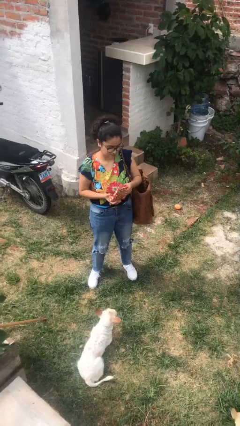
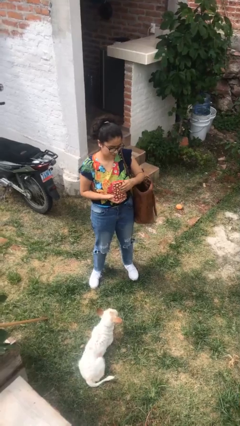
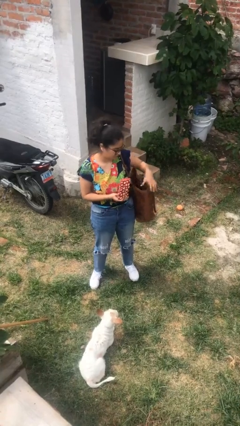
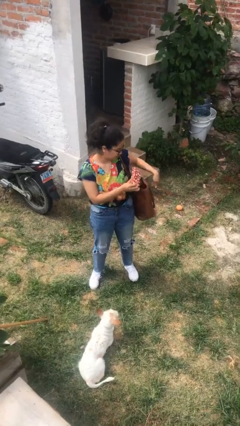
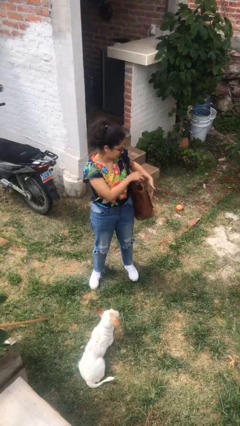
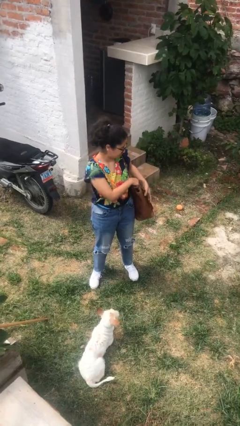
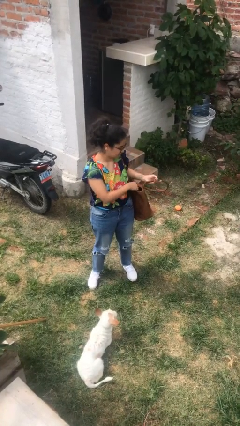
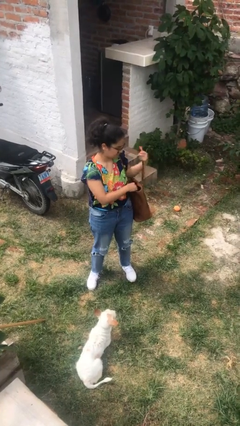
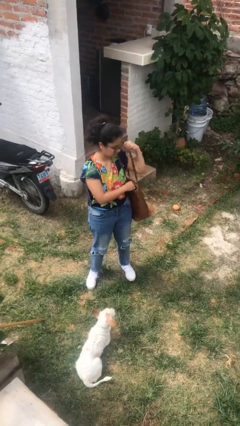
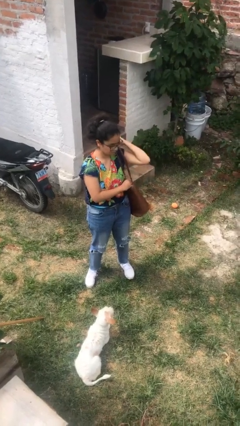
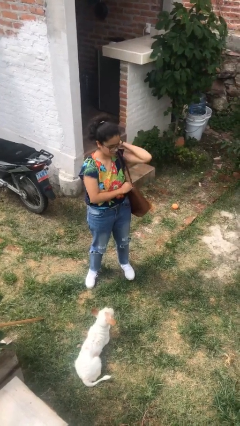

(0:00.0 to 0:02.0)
person puts object into purse

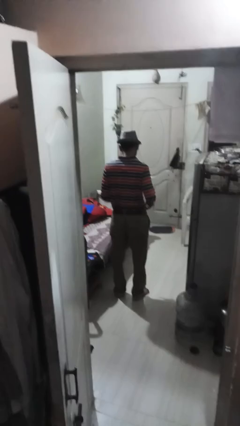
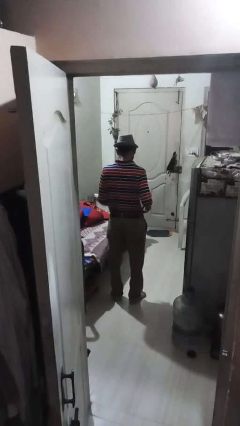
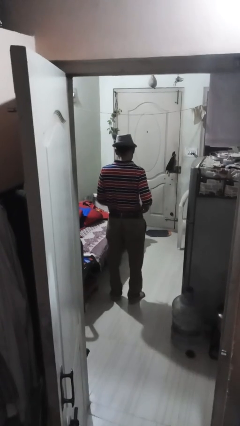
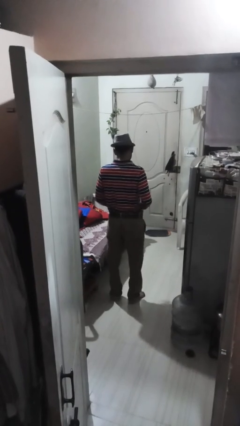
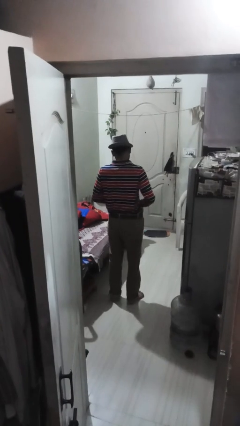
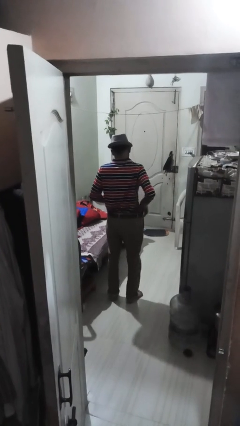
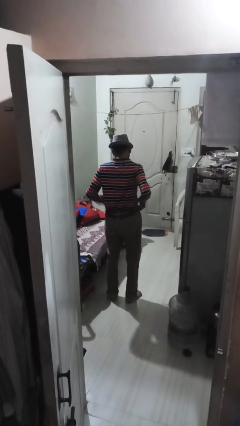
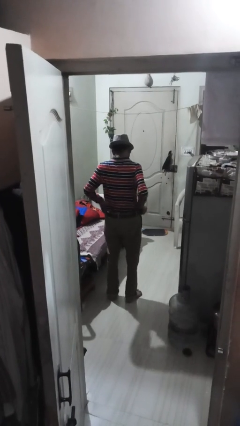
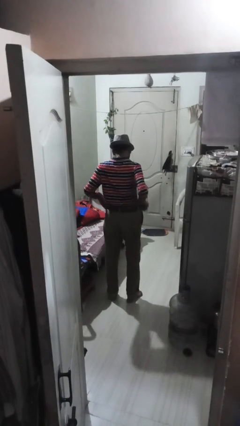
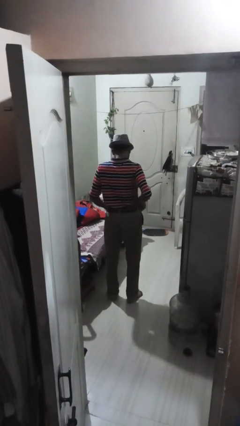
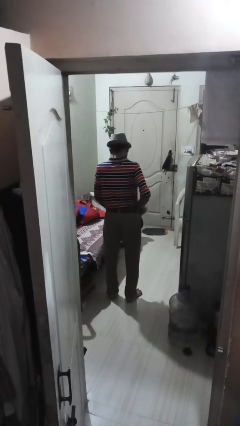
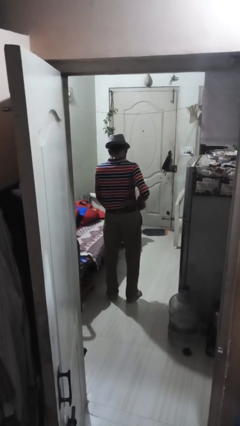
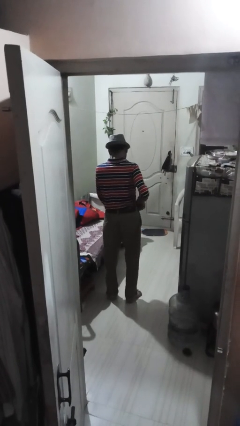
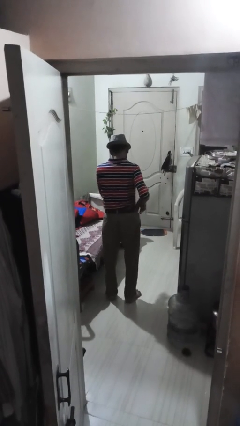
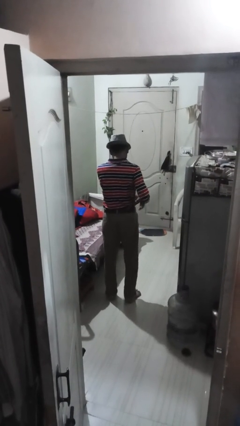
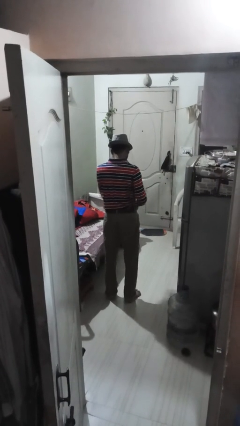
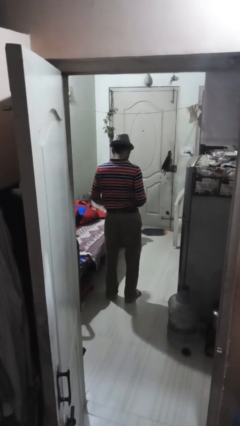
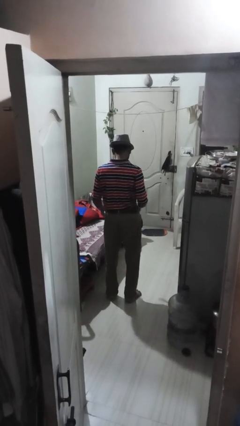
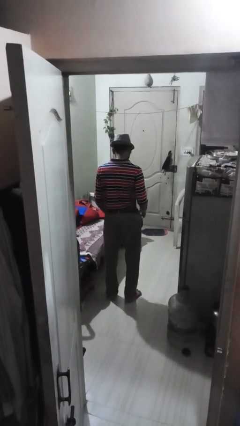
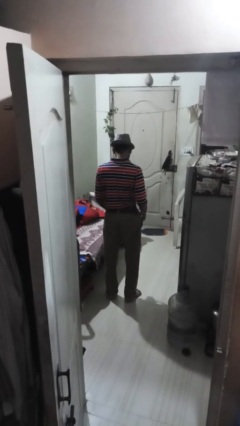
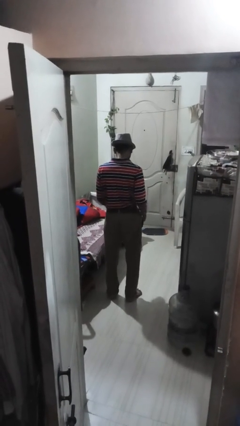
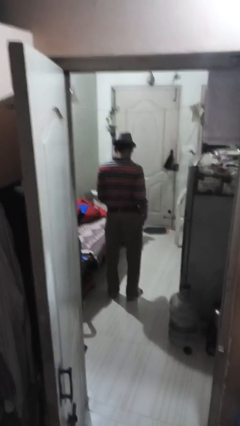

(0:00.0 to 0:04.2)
person hikes up pants

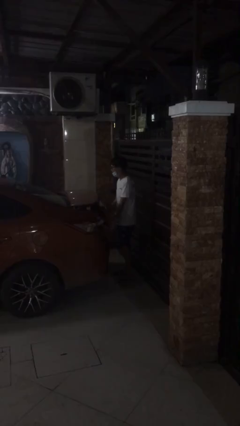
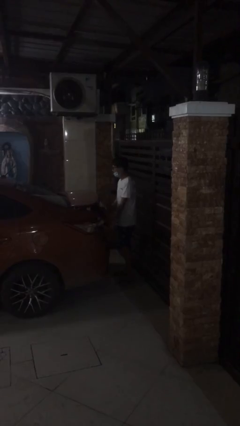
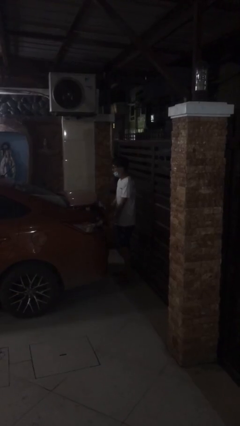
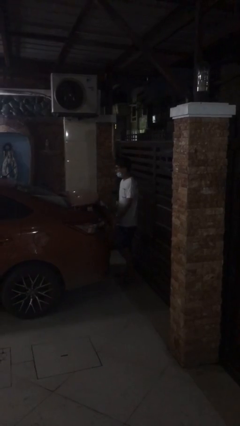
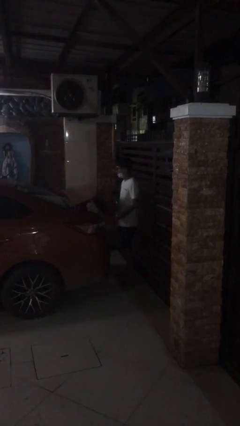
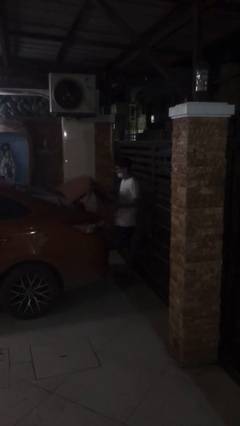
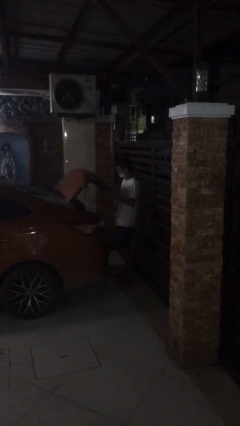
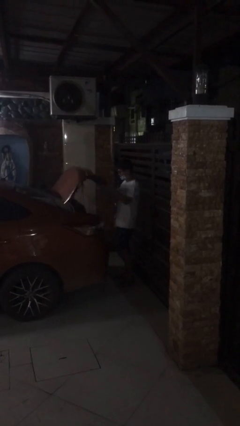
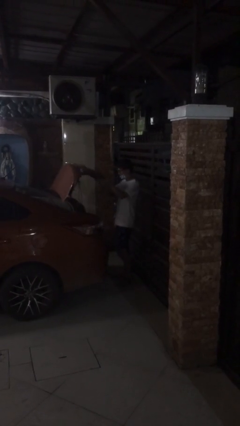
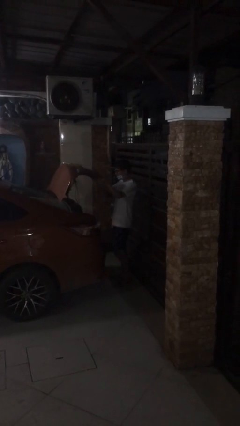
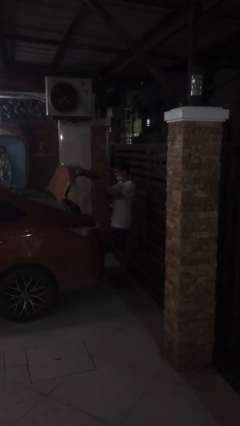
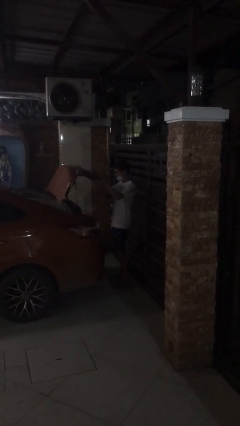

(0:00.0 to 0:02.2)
person opens car trunk

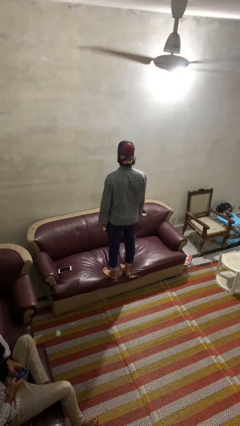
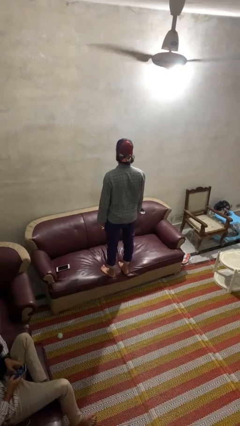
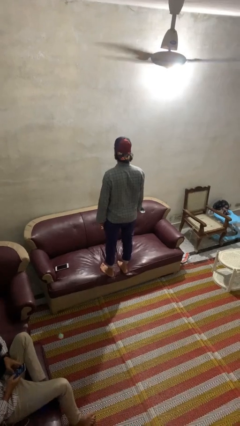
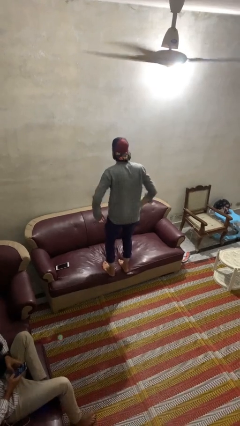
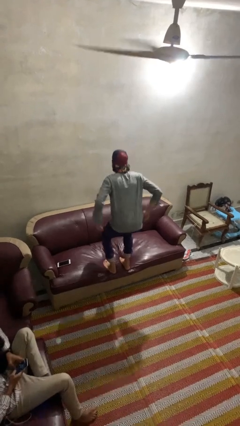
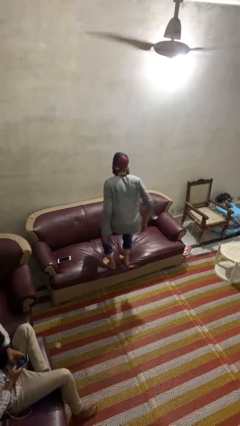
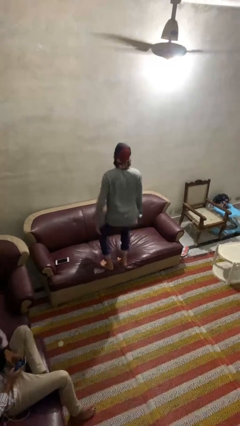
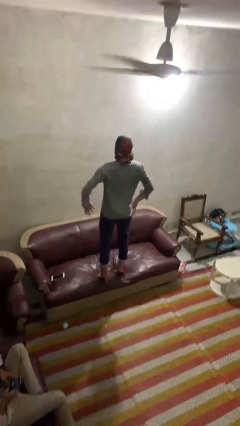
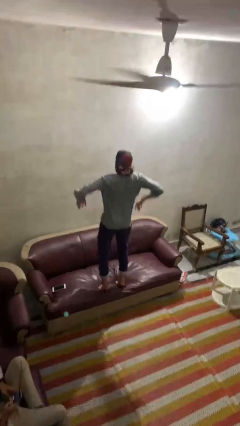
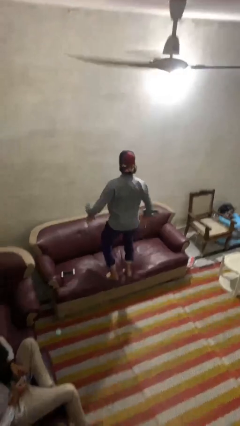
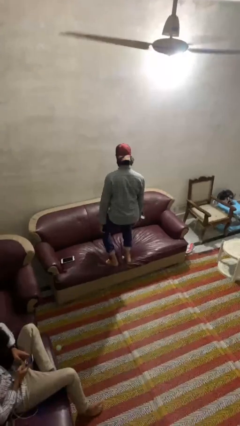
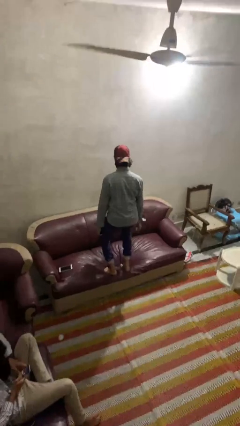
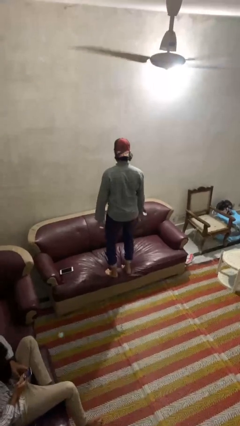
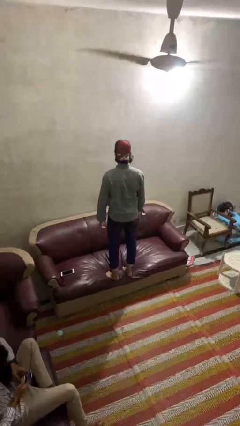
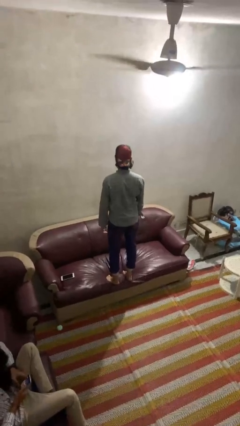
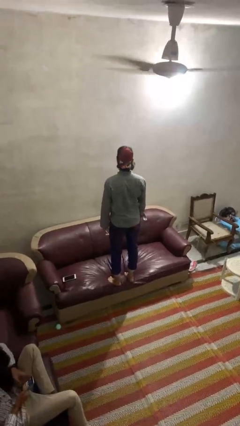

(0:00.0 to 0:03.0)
person jumps on couch

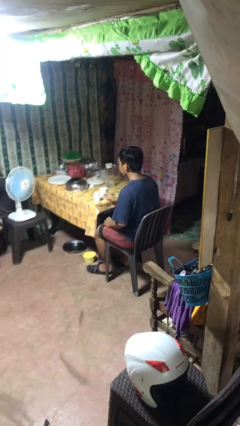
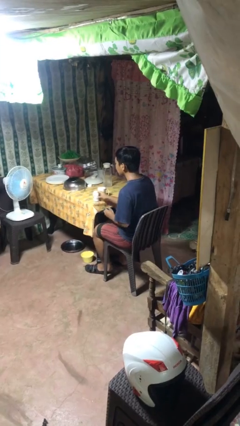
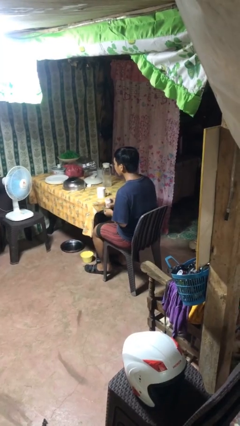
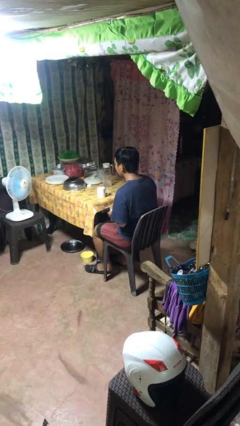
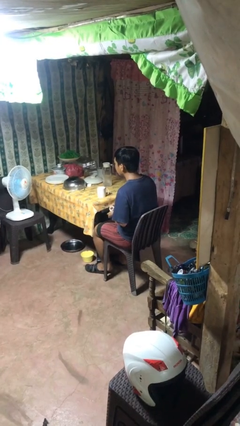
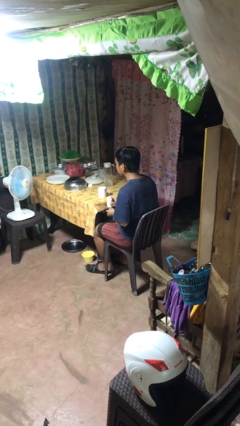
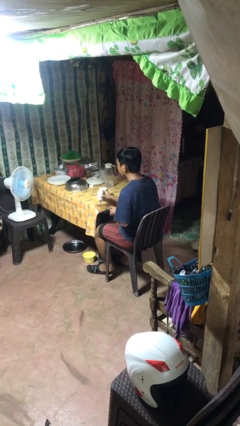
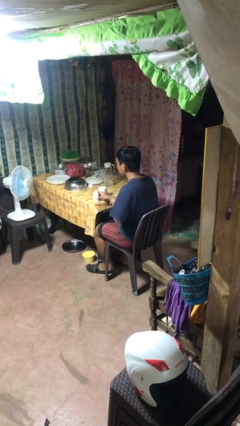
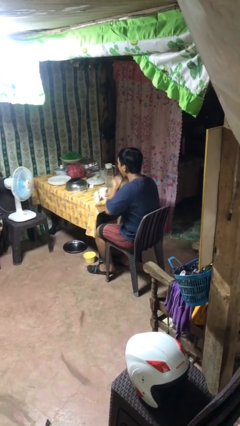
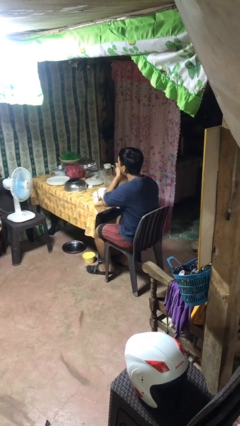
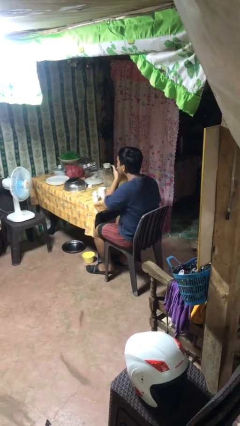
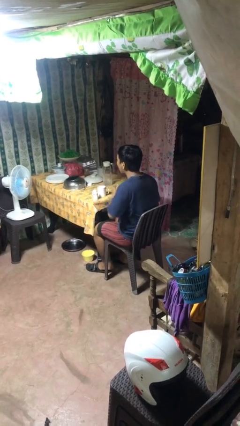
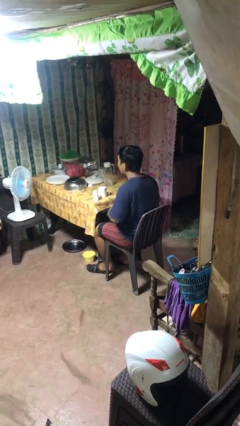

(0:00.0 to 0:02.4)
person takes medicine pills

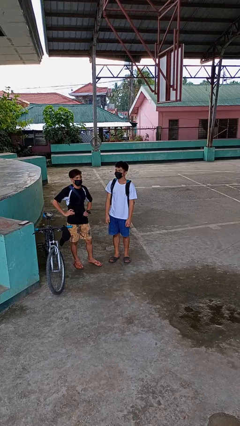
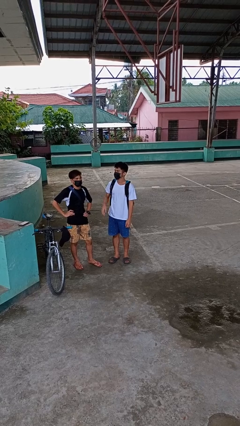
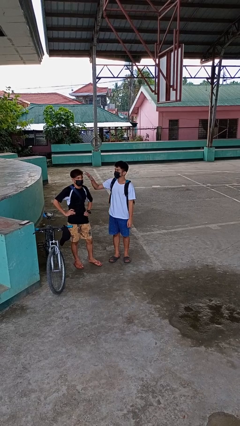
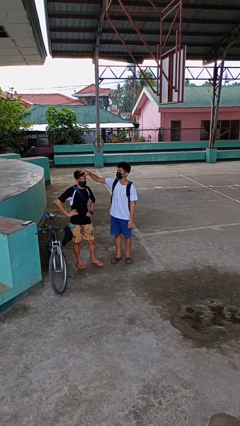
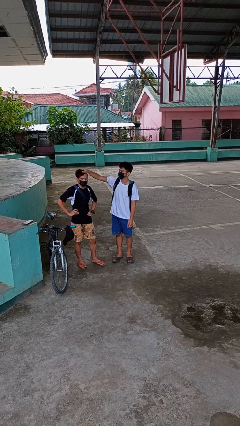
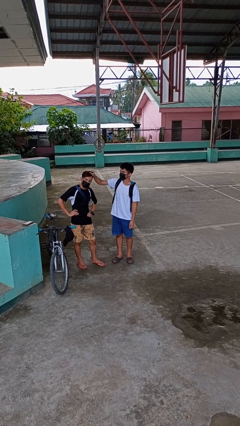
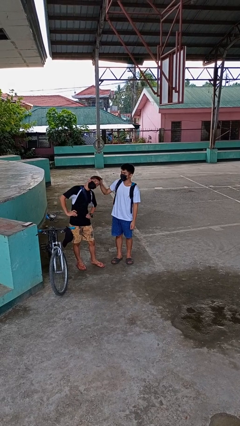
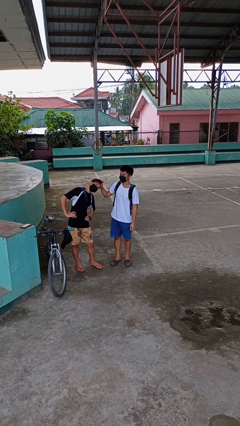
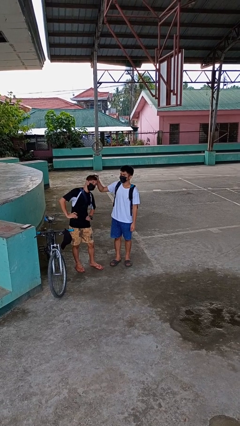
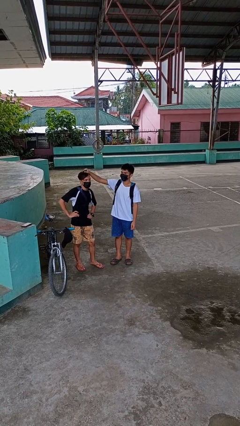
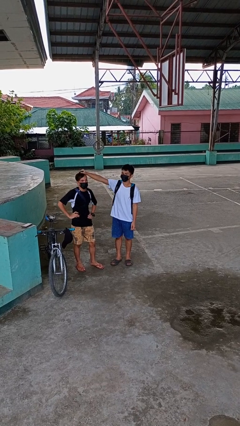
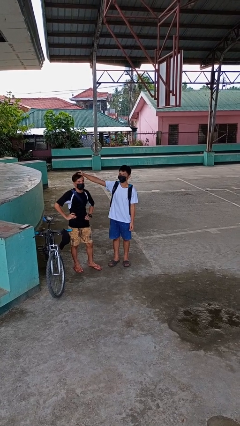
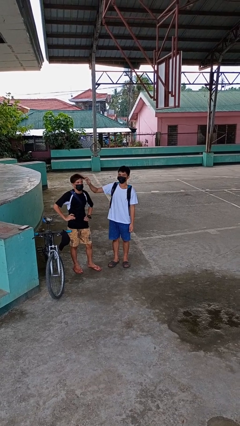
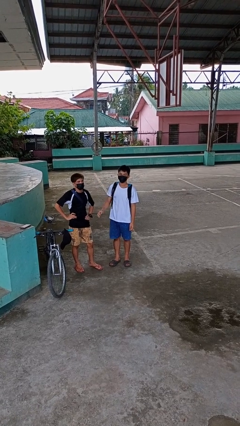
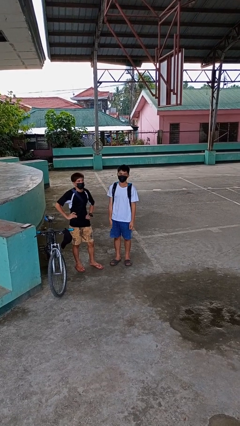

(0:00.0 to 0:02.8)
person grabs person by hair

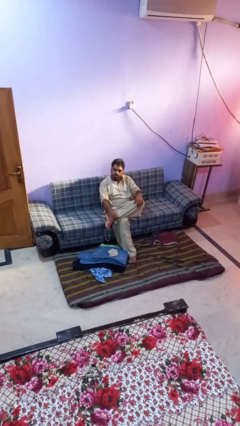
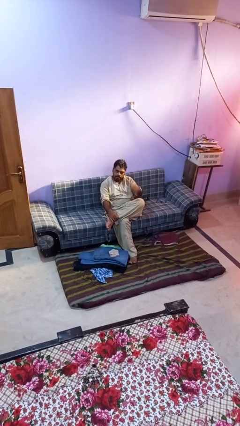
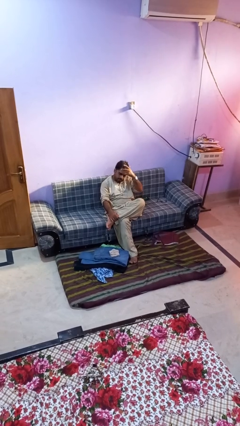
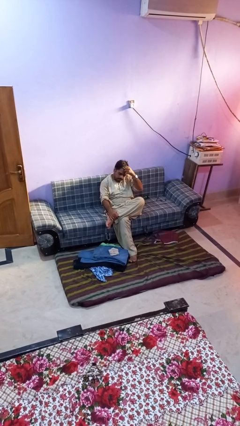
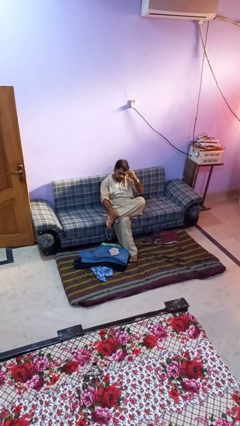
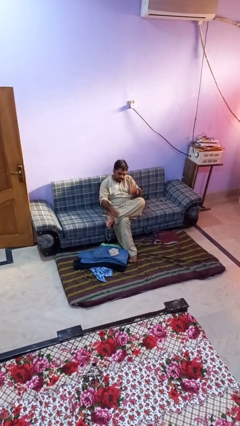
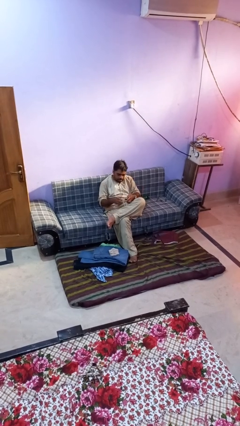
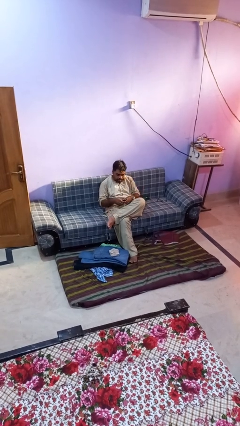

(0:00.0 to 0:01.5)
person takes off hairtie
